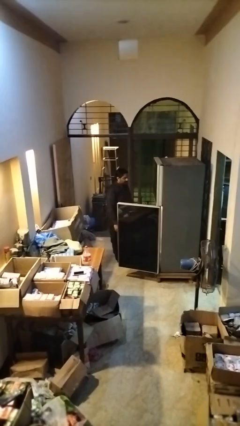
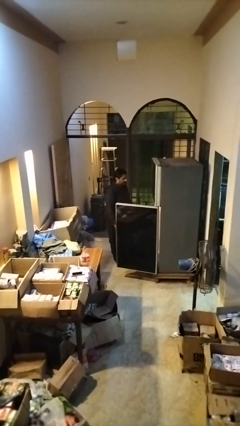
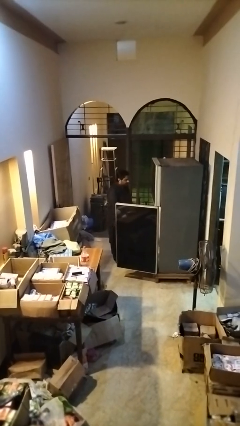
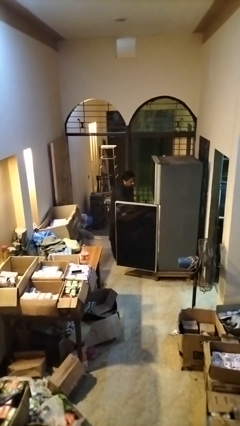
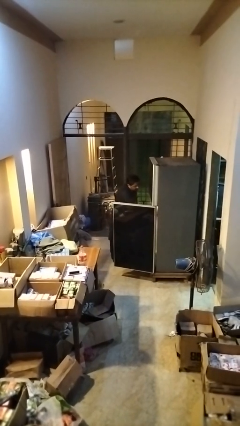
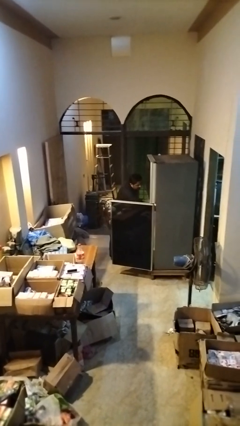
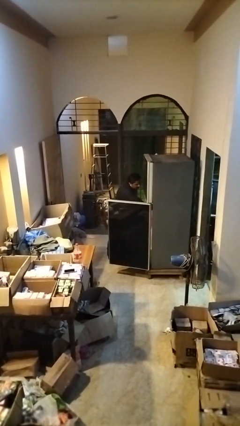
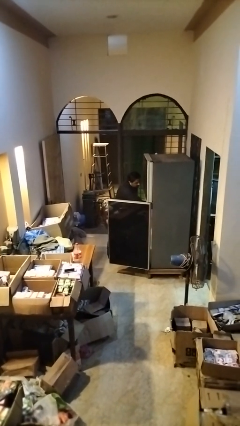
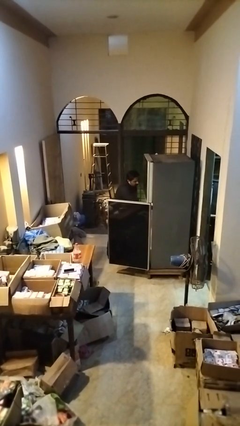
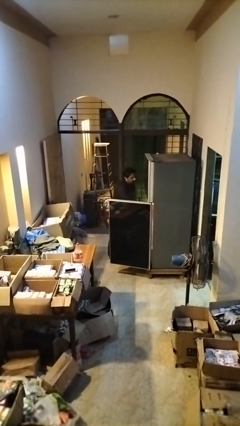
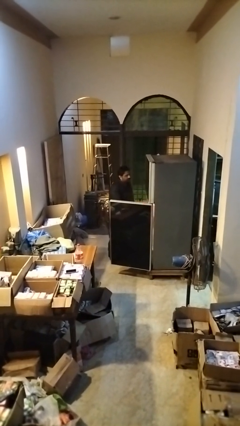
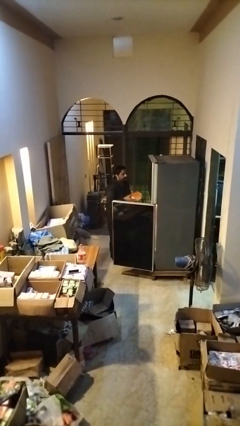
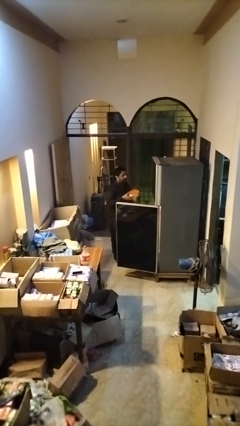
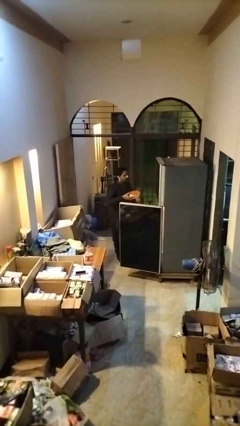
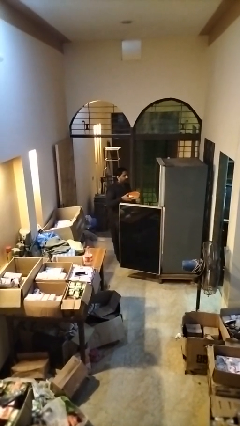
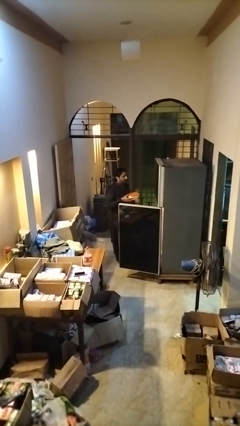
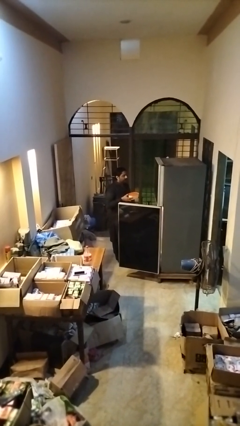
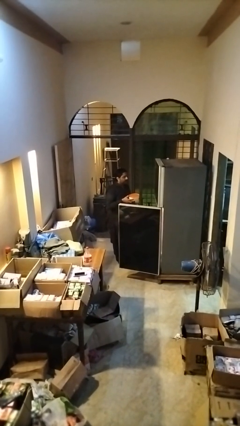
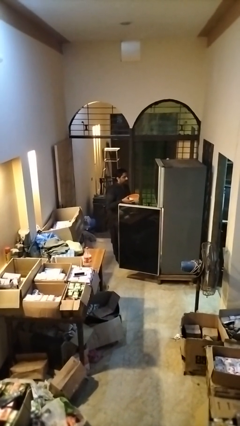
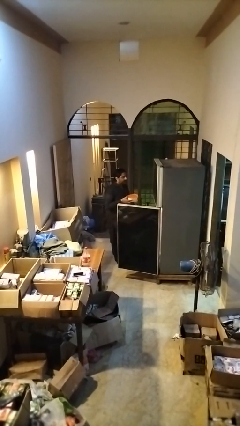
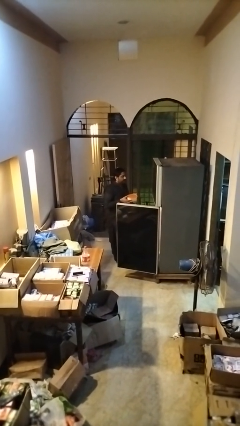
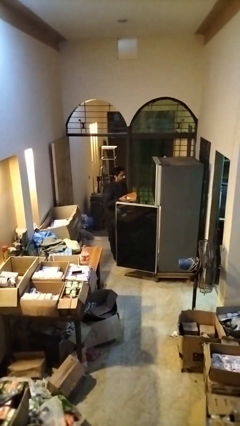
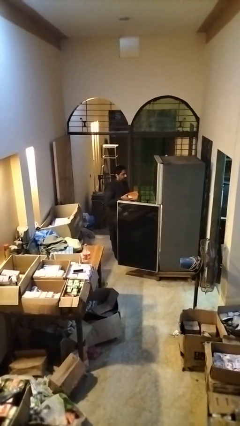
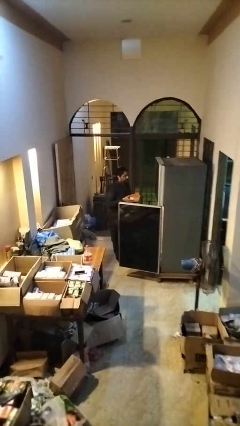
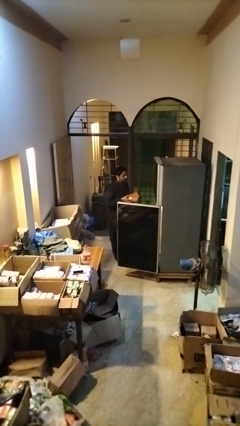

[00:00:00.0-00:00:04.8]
person puts object into refrigerator

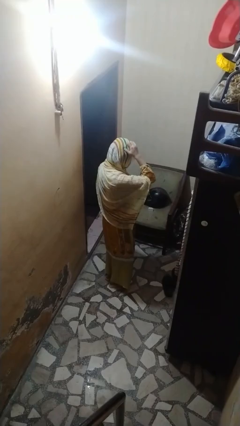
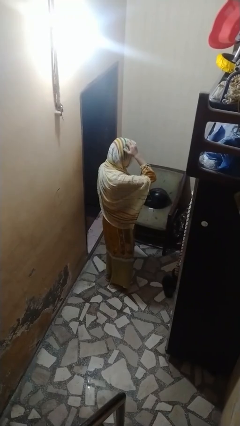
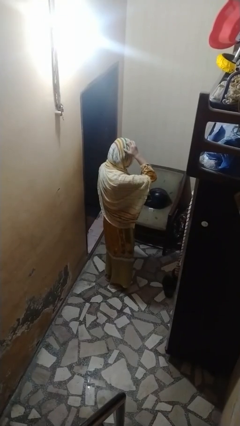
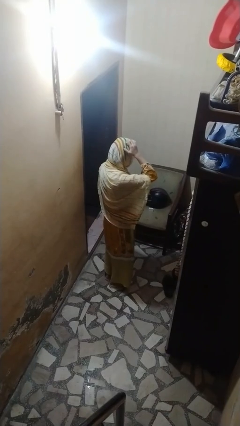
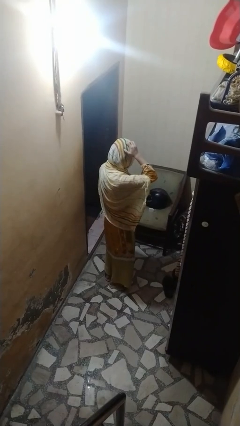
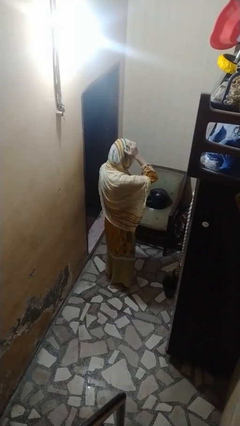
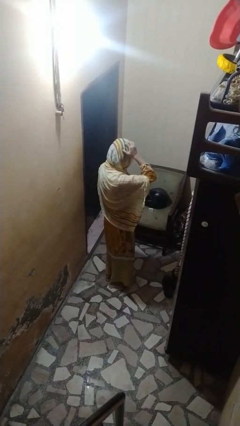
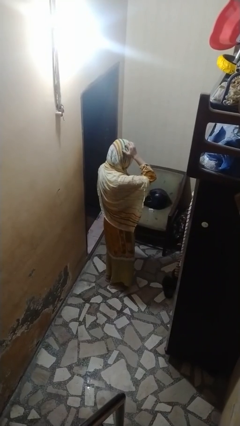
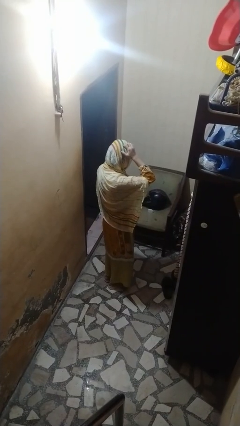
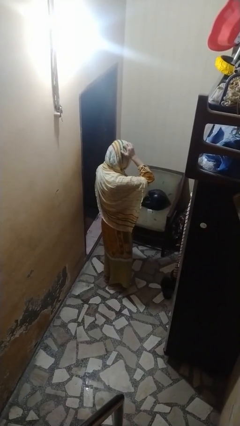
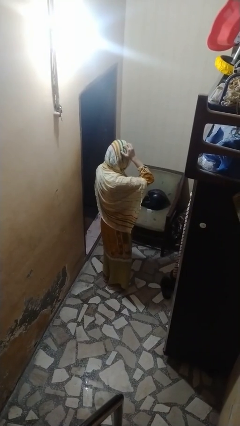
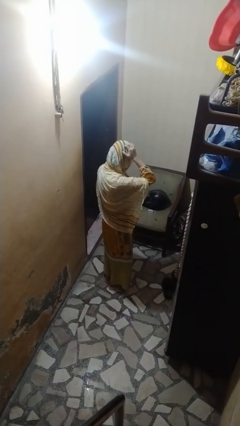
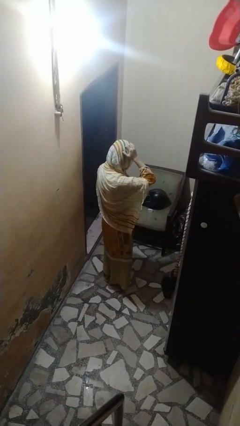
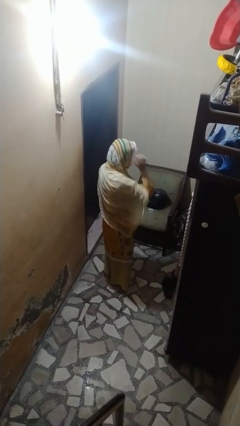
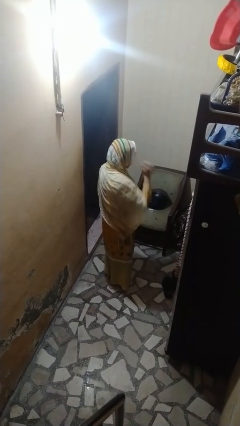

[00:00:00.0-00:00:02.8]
person scratches face

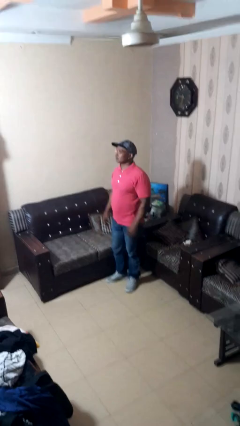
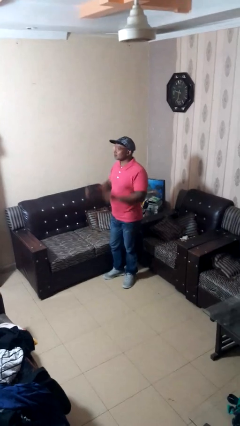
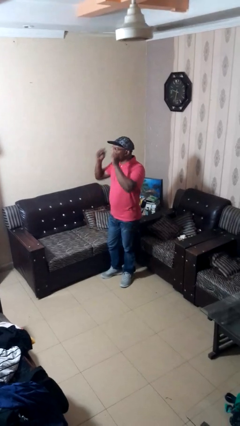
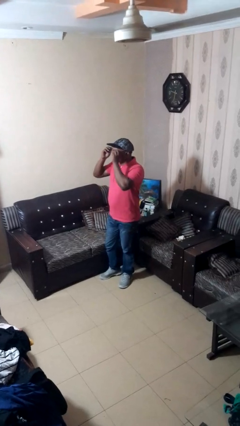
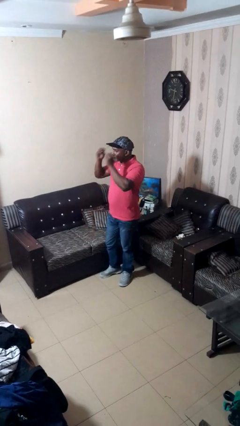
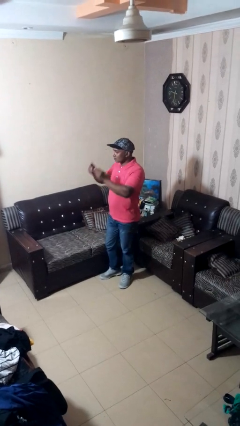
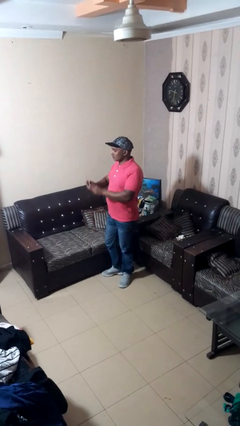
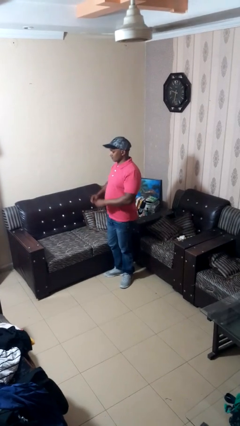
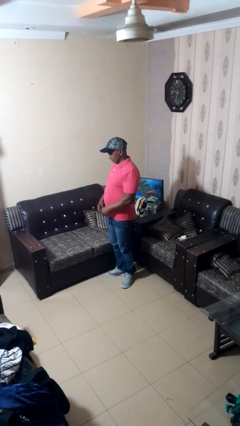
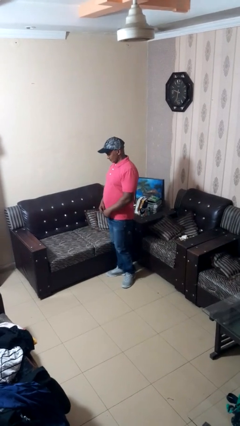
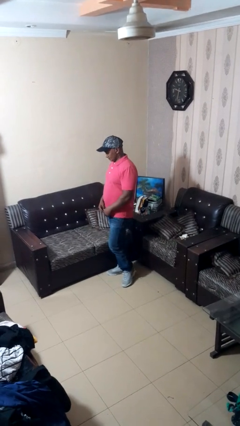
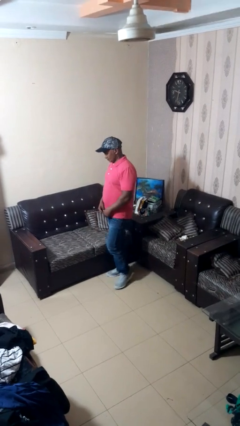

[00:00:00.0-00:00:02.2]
person takes off glasses

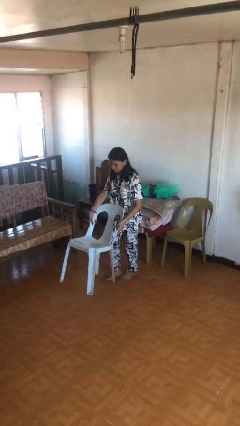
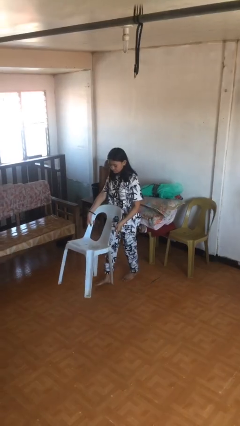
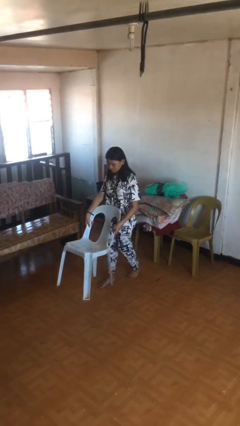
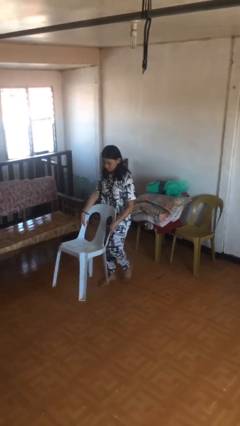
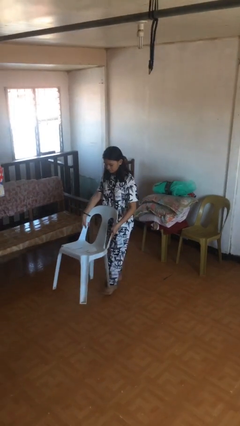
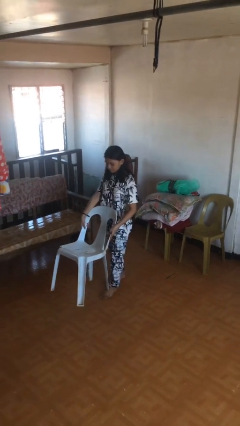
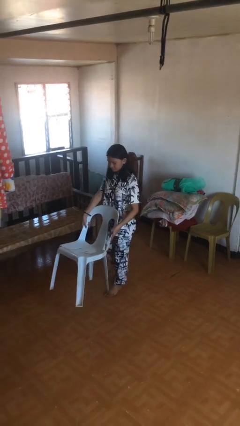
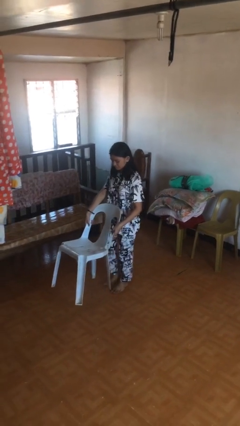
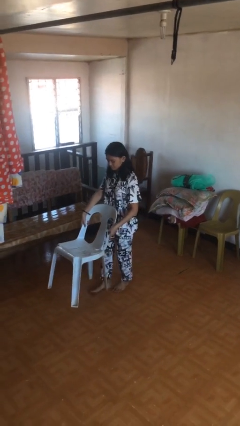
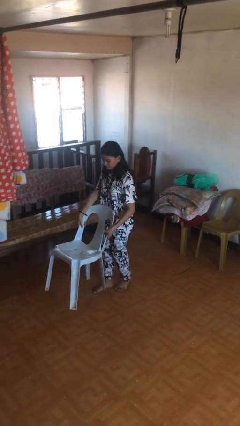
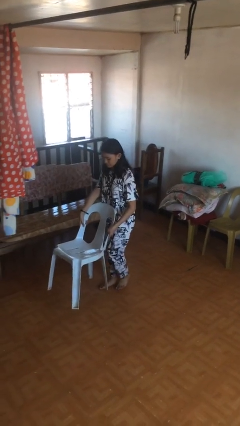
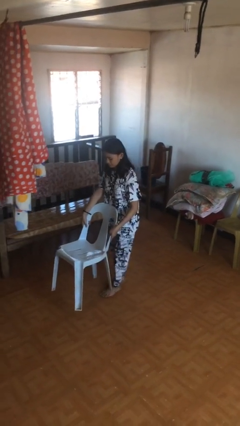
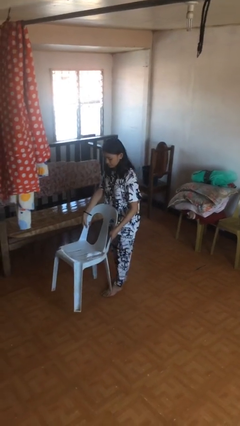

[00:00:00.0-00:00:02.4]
person carries heavy object

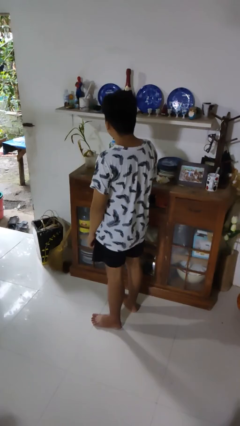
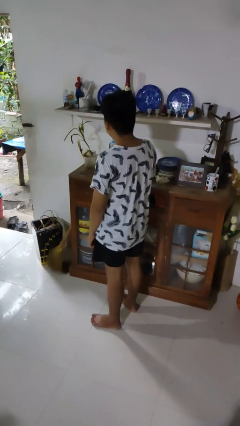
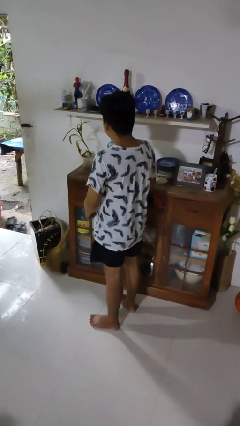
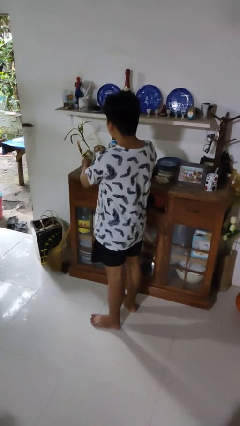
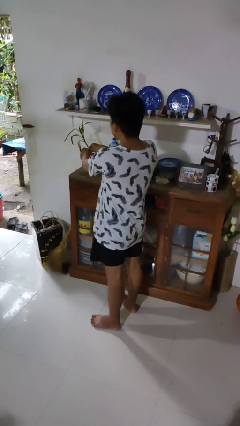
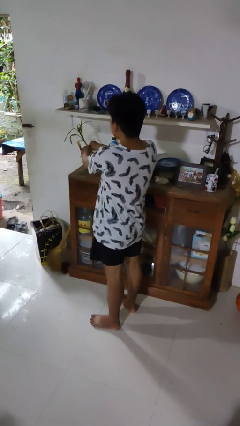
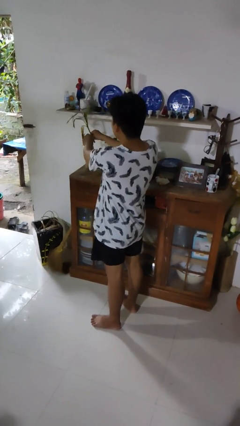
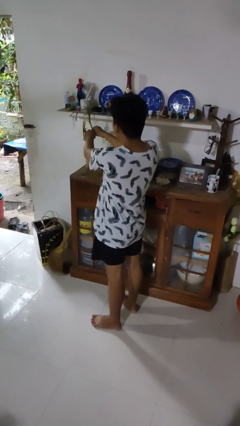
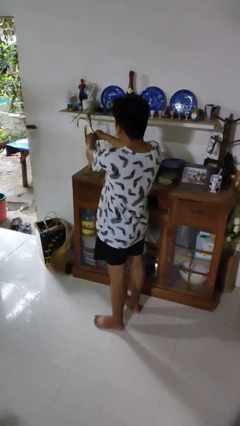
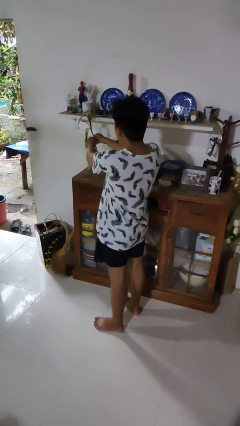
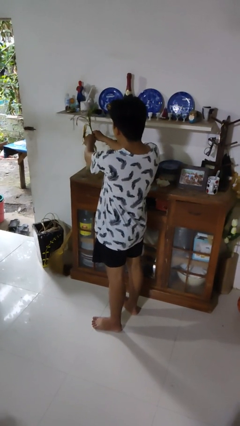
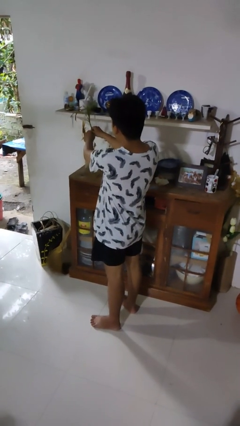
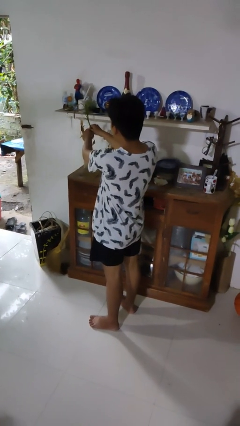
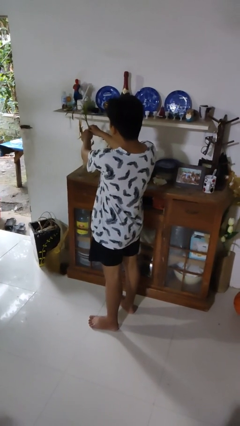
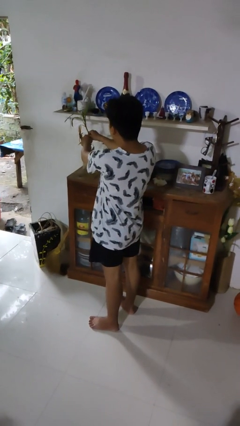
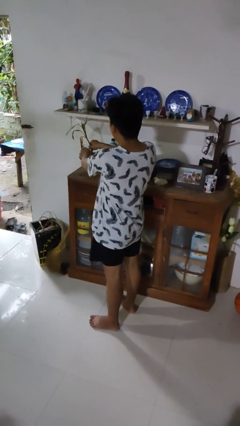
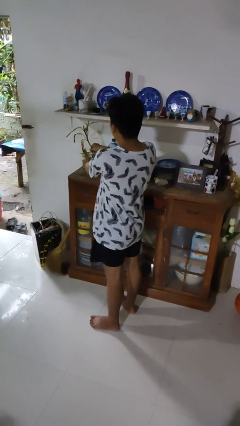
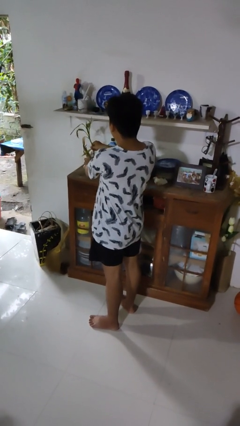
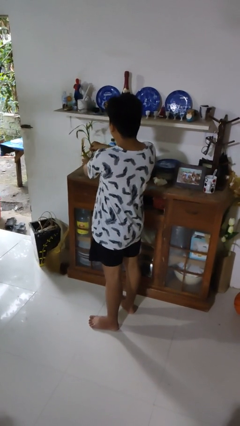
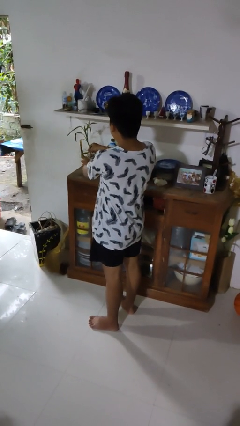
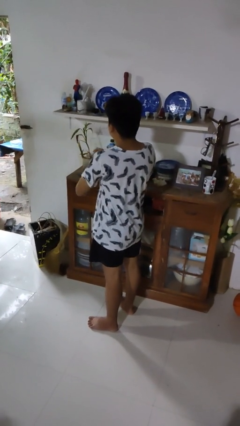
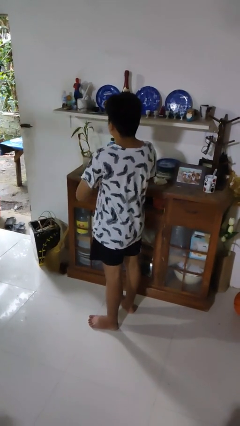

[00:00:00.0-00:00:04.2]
person arranges flowers in vase

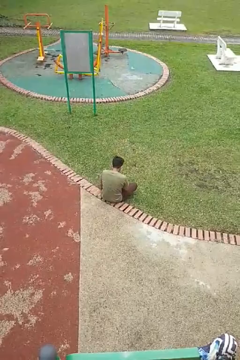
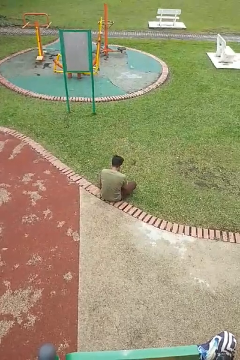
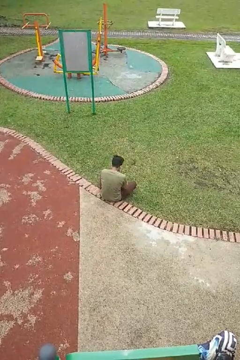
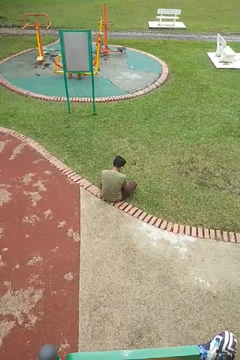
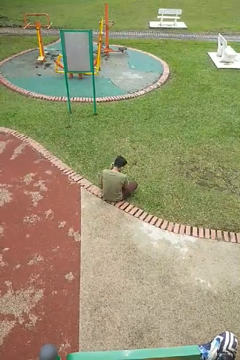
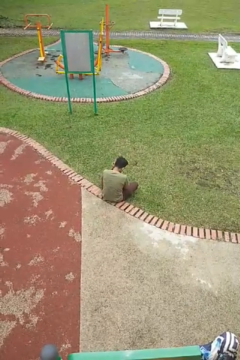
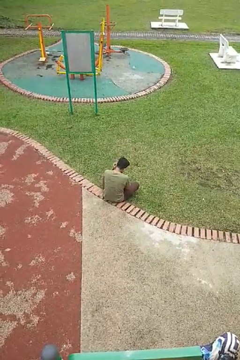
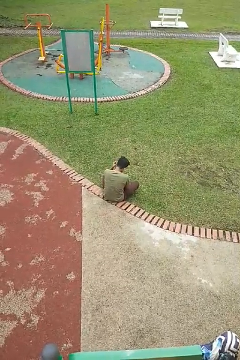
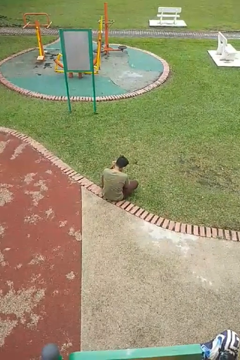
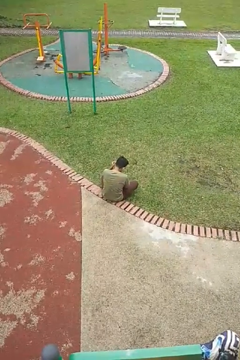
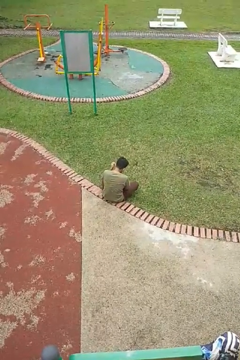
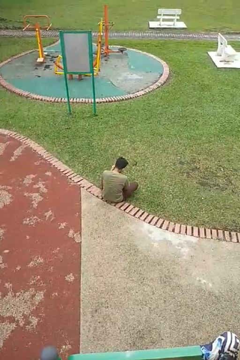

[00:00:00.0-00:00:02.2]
person touches earlobe
